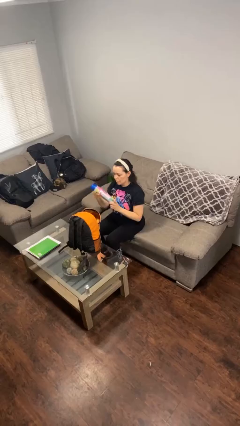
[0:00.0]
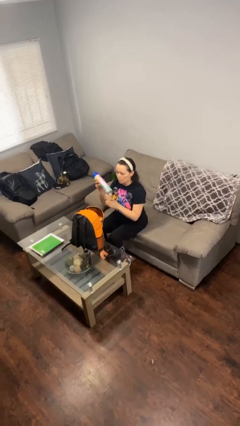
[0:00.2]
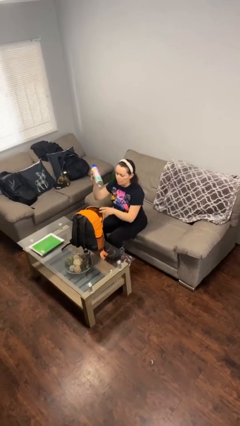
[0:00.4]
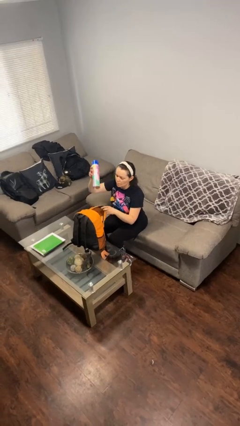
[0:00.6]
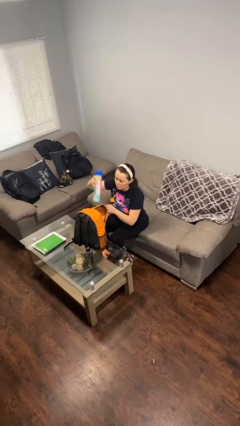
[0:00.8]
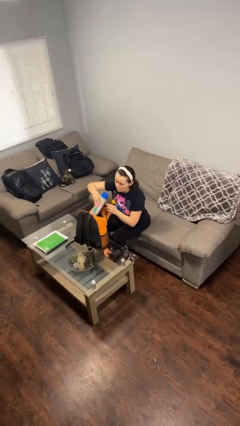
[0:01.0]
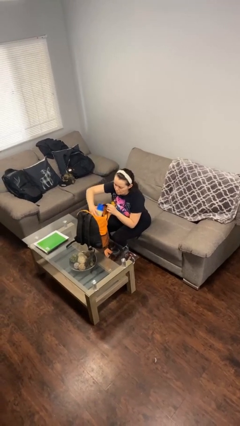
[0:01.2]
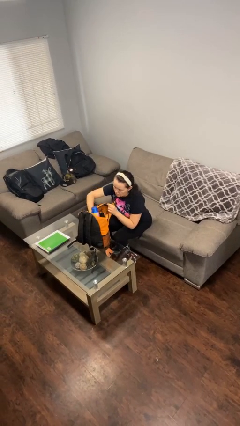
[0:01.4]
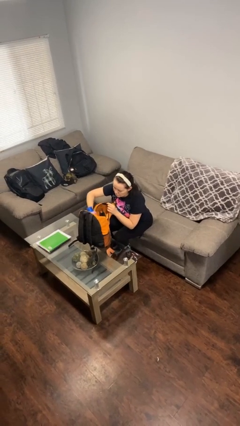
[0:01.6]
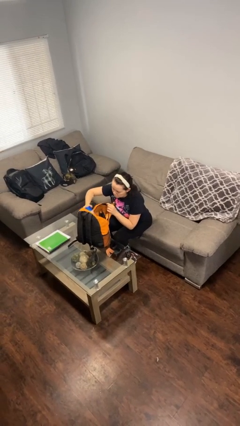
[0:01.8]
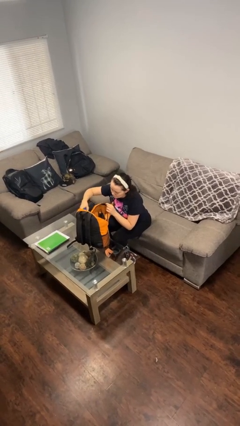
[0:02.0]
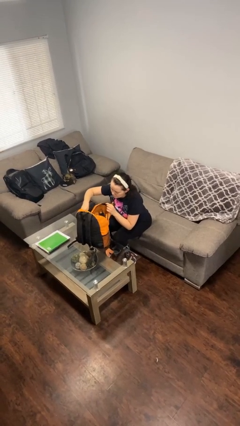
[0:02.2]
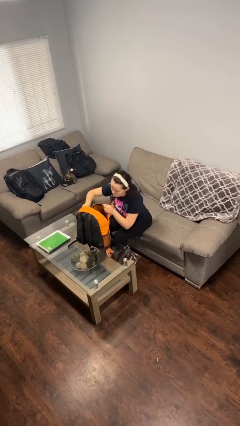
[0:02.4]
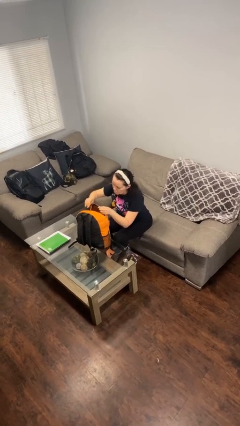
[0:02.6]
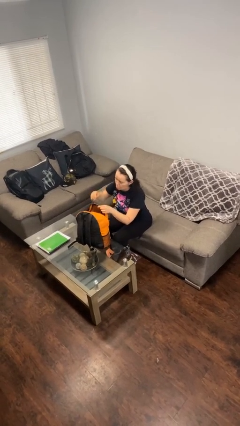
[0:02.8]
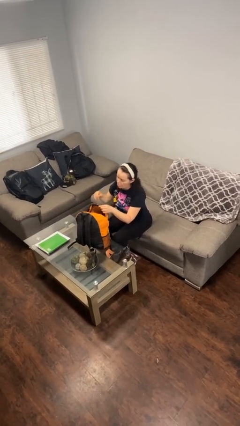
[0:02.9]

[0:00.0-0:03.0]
person puts object into backpack

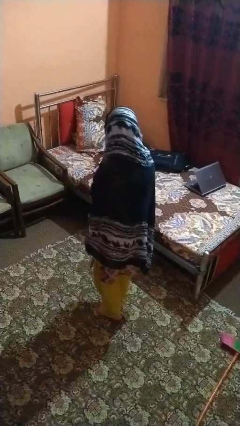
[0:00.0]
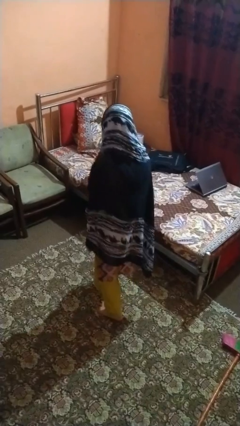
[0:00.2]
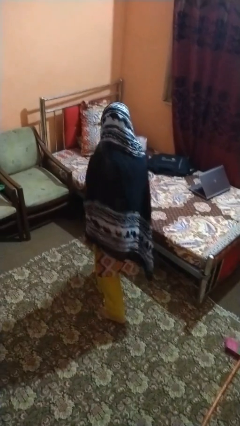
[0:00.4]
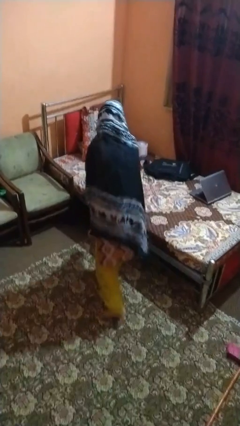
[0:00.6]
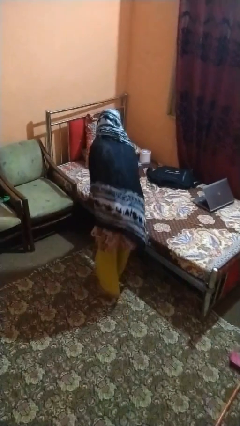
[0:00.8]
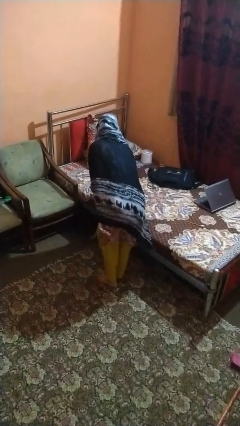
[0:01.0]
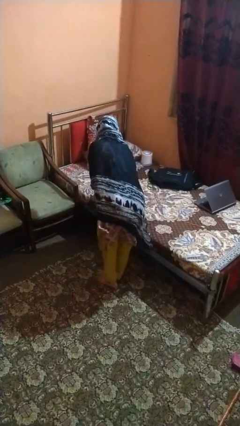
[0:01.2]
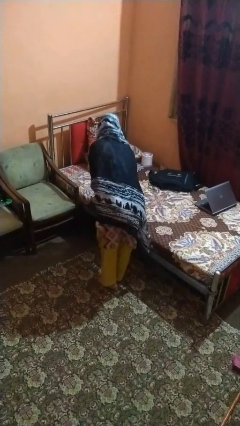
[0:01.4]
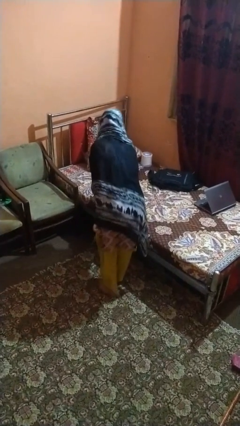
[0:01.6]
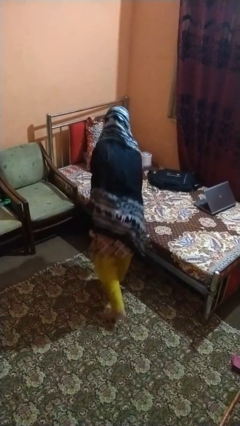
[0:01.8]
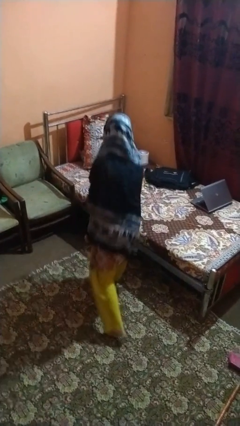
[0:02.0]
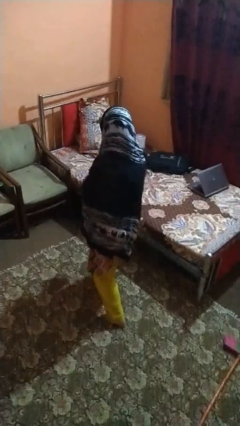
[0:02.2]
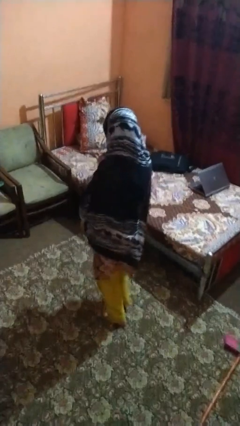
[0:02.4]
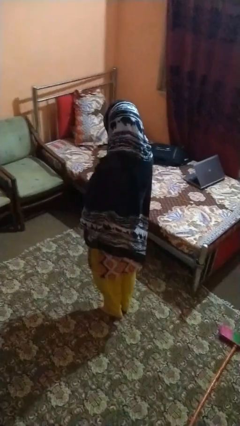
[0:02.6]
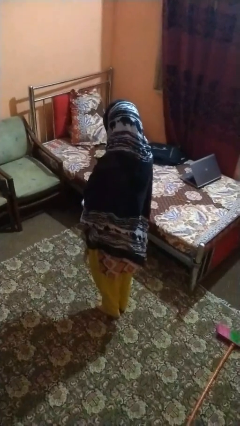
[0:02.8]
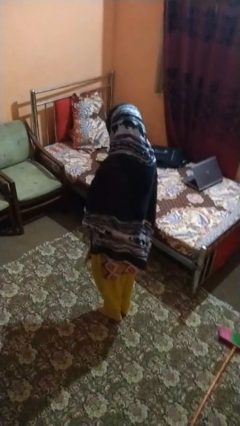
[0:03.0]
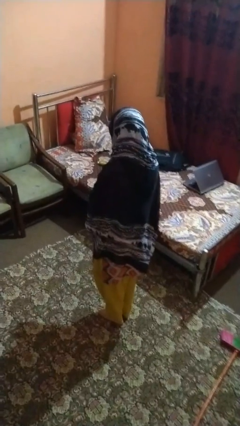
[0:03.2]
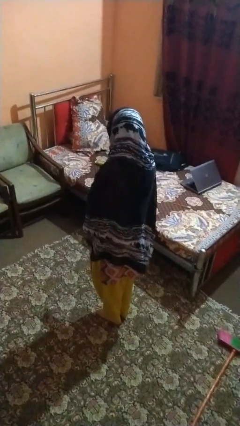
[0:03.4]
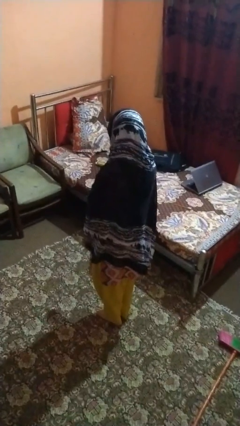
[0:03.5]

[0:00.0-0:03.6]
person picks up object from bed

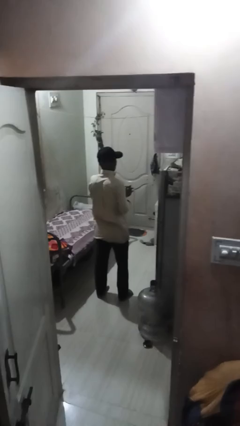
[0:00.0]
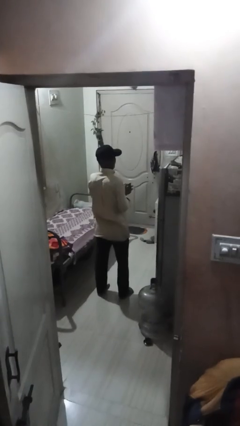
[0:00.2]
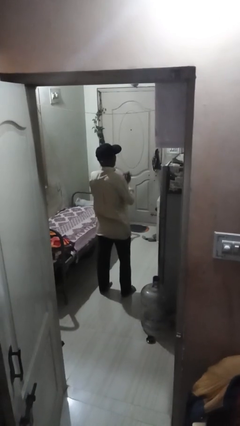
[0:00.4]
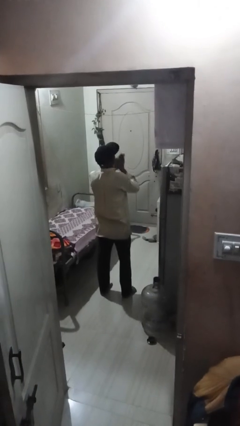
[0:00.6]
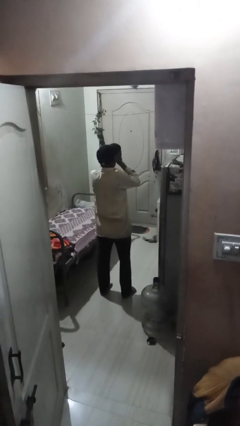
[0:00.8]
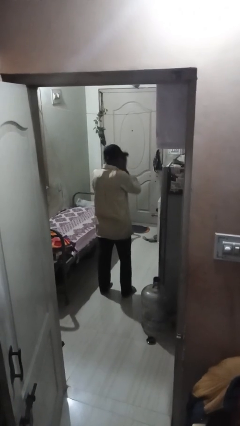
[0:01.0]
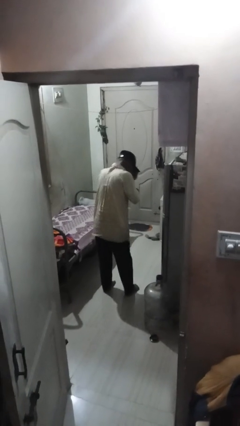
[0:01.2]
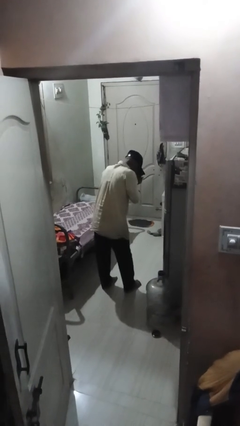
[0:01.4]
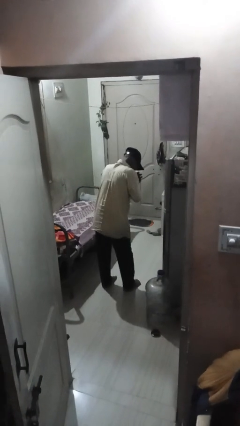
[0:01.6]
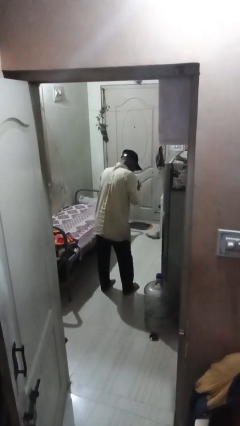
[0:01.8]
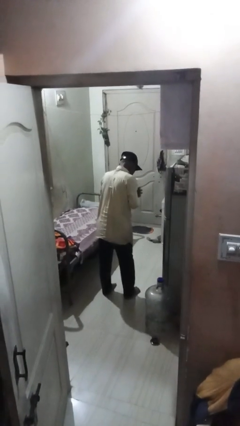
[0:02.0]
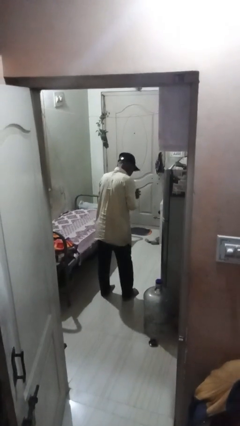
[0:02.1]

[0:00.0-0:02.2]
person sneezes into hand

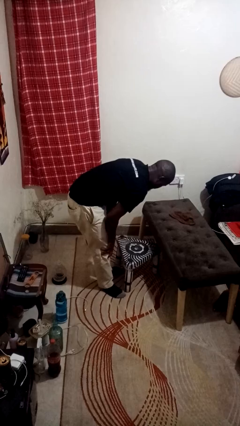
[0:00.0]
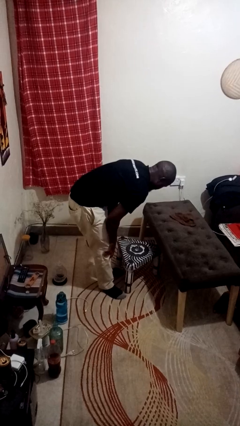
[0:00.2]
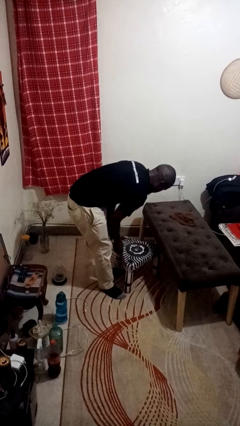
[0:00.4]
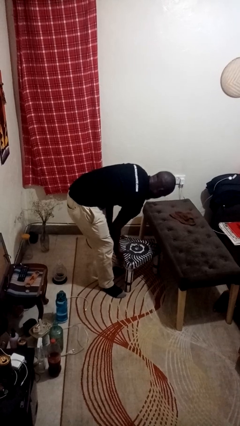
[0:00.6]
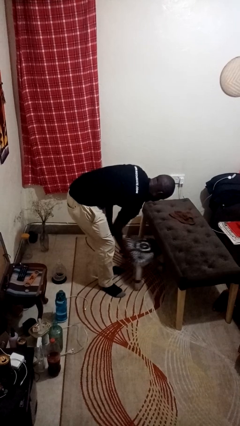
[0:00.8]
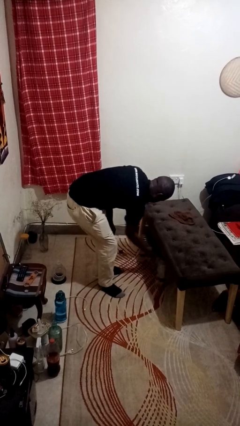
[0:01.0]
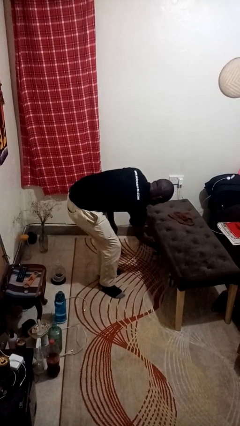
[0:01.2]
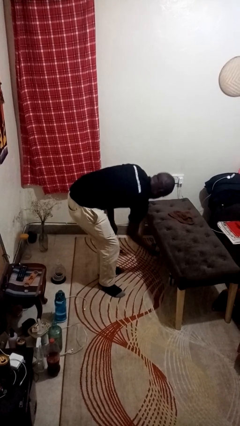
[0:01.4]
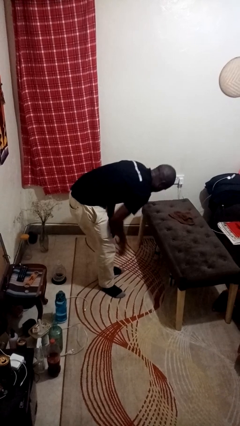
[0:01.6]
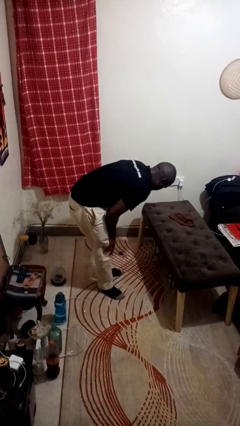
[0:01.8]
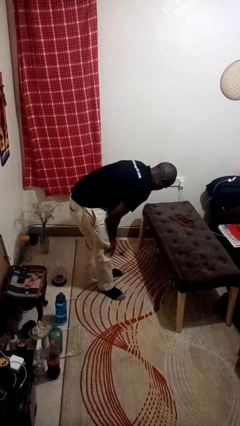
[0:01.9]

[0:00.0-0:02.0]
person pushes in chair

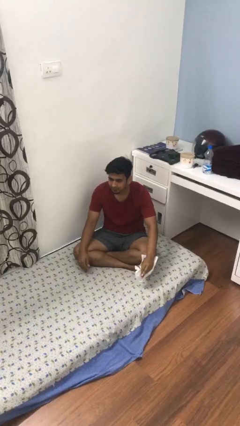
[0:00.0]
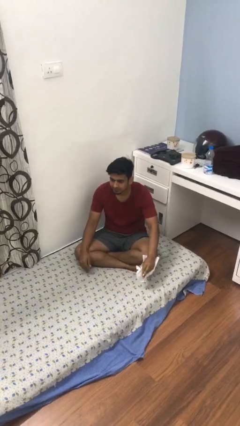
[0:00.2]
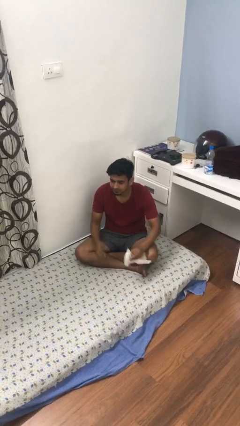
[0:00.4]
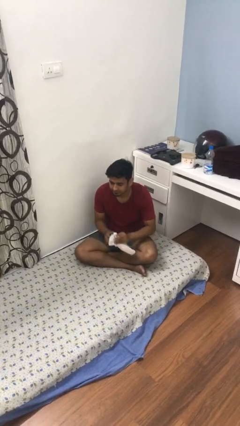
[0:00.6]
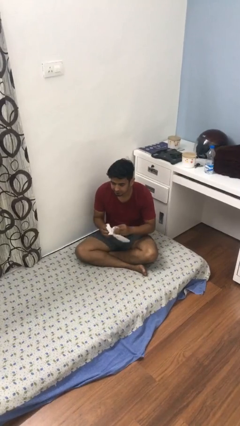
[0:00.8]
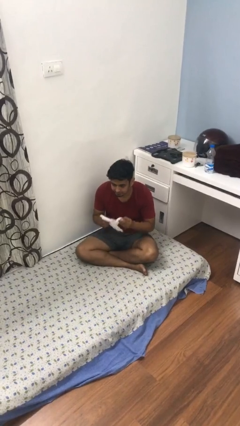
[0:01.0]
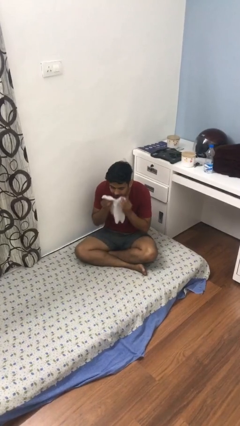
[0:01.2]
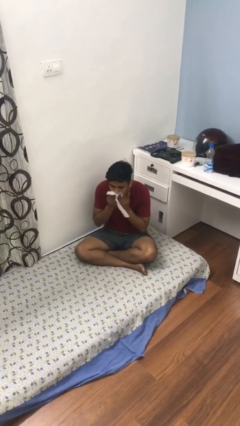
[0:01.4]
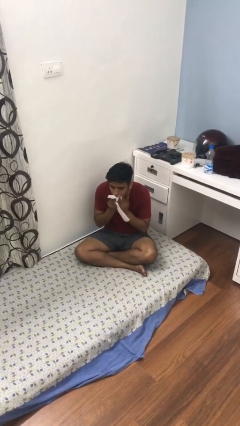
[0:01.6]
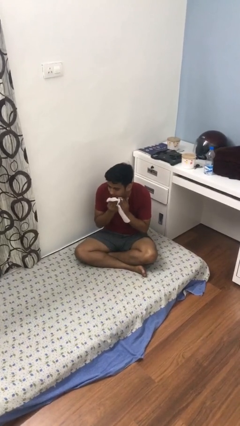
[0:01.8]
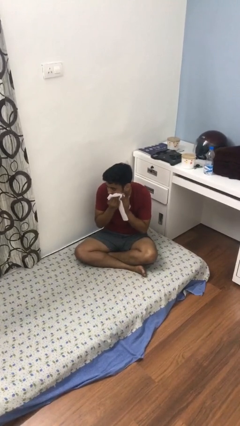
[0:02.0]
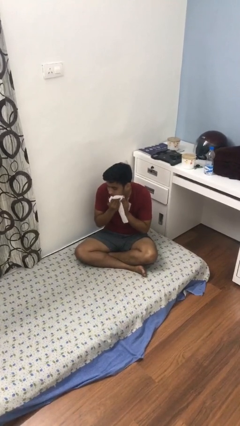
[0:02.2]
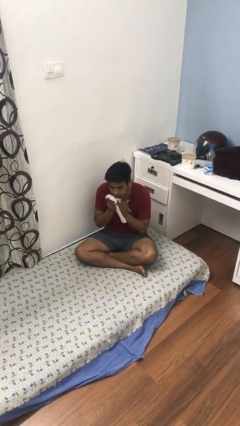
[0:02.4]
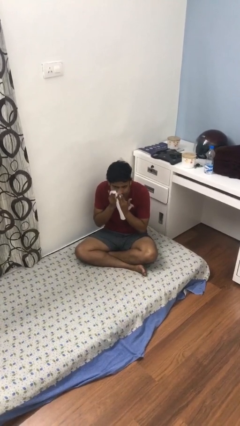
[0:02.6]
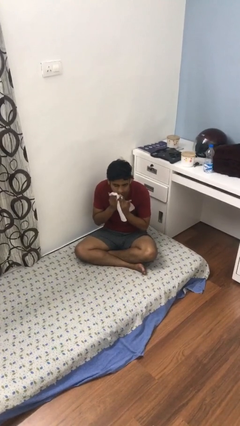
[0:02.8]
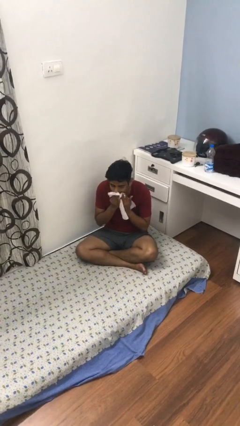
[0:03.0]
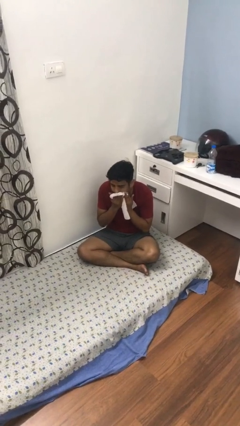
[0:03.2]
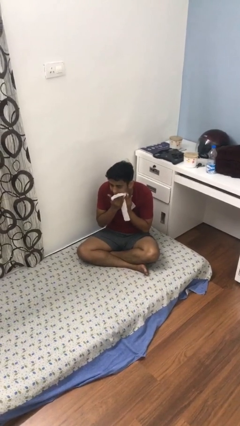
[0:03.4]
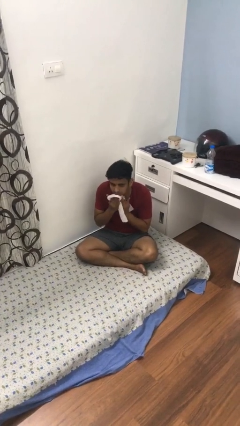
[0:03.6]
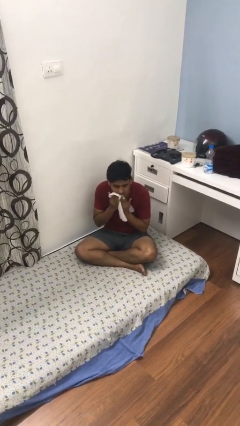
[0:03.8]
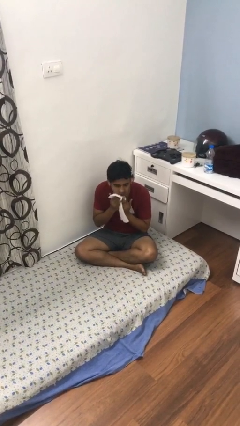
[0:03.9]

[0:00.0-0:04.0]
person wipes mouth with napkin

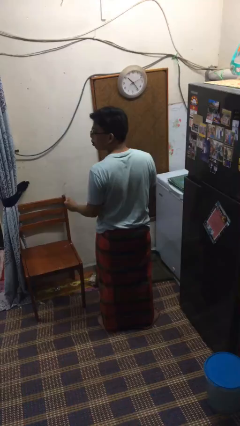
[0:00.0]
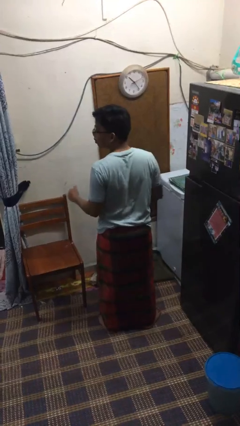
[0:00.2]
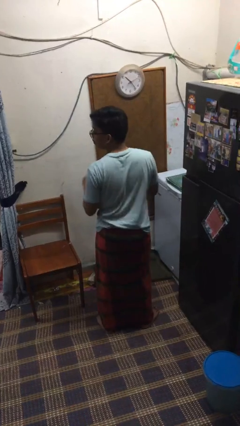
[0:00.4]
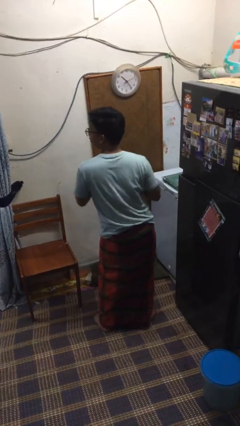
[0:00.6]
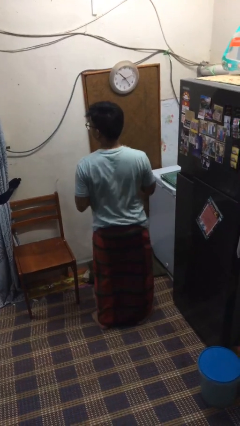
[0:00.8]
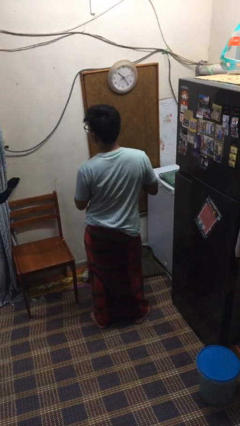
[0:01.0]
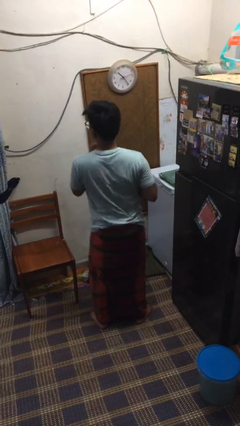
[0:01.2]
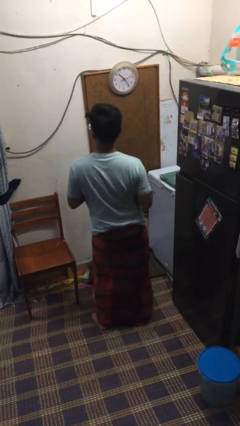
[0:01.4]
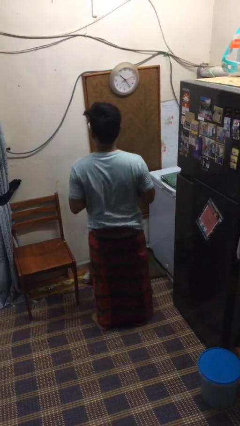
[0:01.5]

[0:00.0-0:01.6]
person wiggles hips

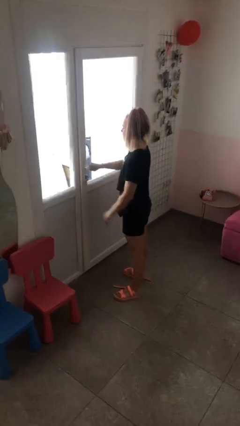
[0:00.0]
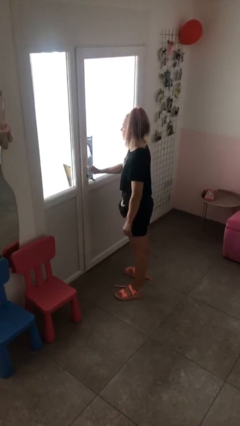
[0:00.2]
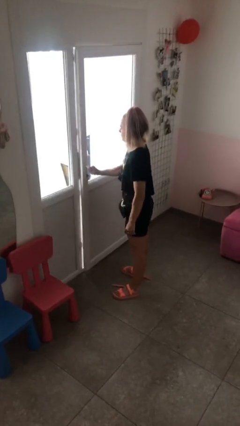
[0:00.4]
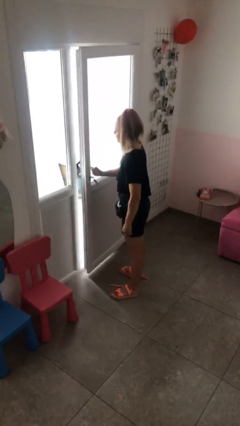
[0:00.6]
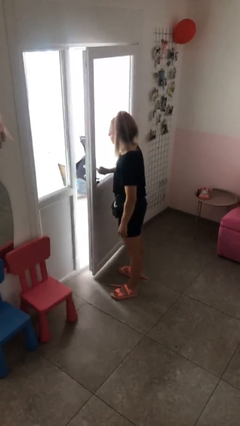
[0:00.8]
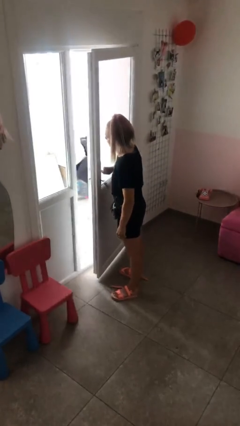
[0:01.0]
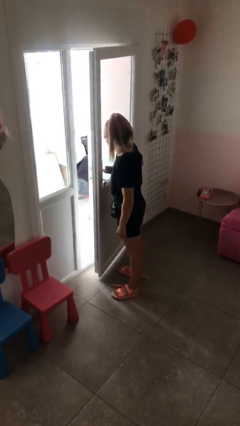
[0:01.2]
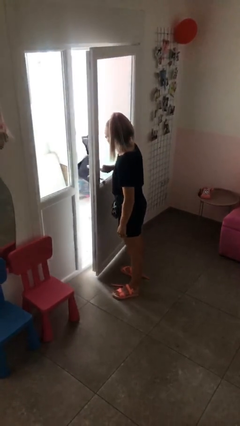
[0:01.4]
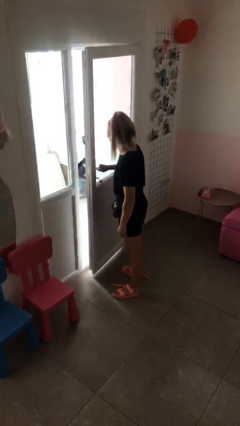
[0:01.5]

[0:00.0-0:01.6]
person opens facility door
